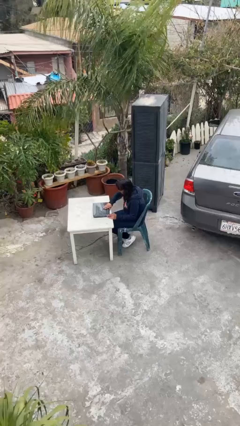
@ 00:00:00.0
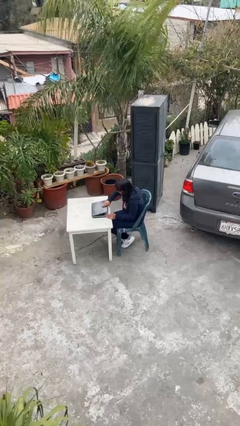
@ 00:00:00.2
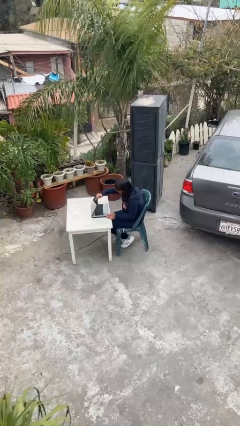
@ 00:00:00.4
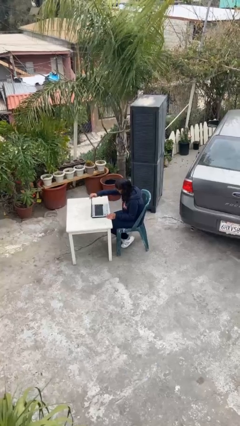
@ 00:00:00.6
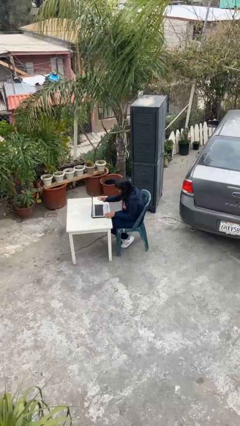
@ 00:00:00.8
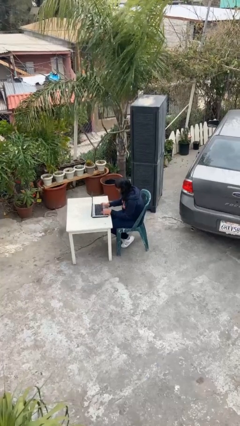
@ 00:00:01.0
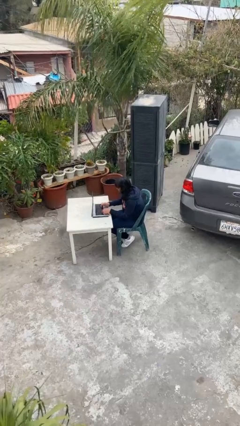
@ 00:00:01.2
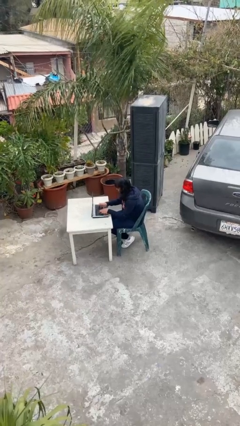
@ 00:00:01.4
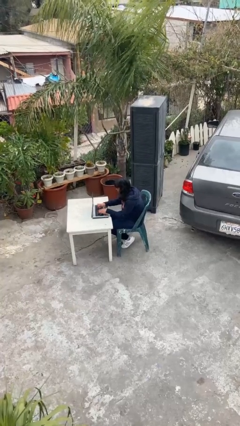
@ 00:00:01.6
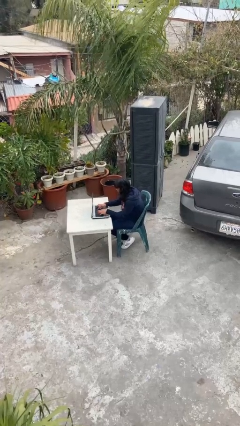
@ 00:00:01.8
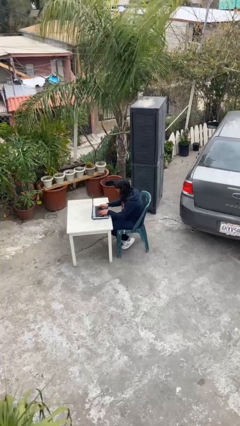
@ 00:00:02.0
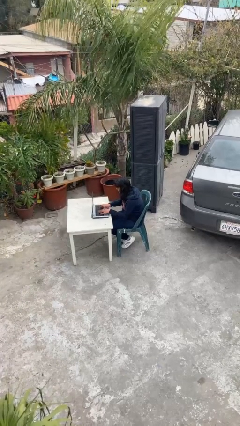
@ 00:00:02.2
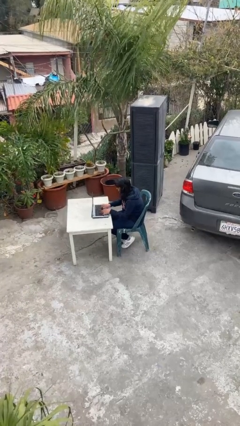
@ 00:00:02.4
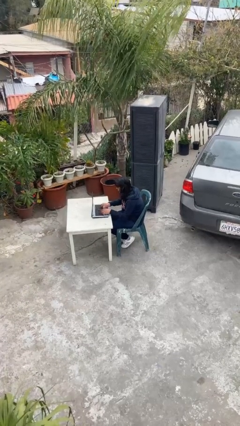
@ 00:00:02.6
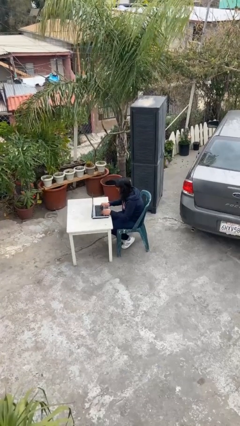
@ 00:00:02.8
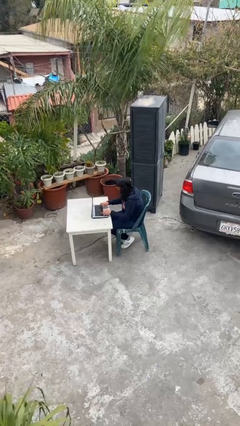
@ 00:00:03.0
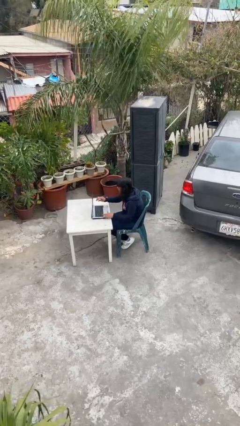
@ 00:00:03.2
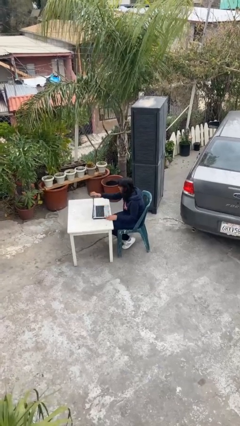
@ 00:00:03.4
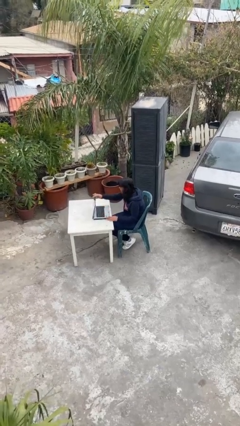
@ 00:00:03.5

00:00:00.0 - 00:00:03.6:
person interacts with laptop

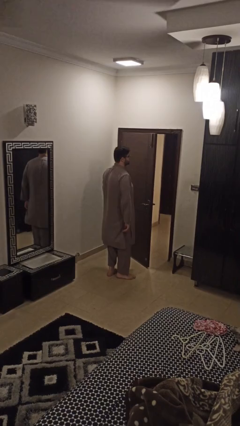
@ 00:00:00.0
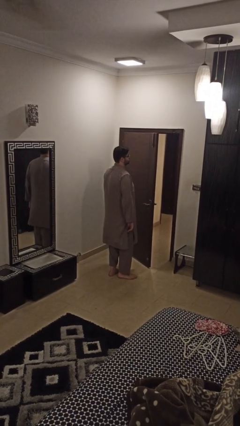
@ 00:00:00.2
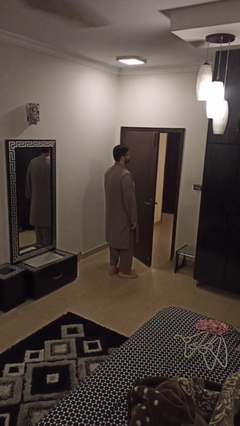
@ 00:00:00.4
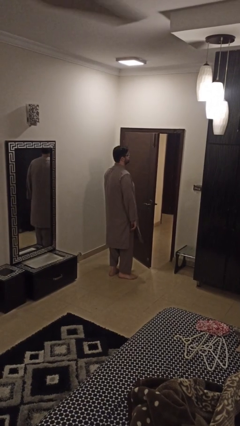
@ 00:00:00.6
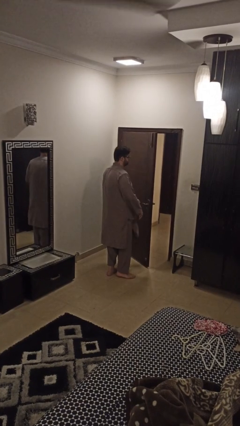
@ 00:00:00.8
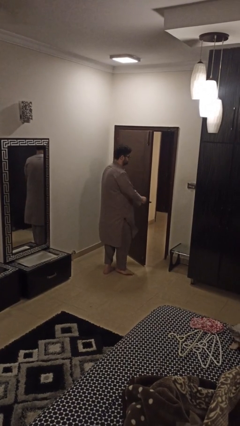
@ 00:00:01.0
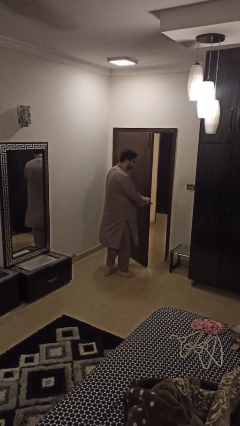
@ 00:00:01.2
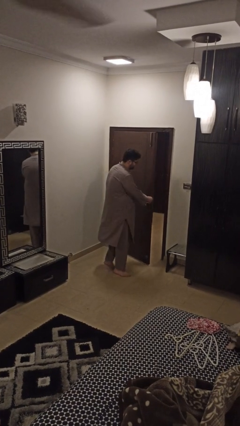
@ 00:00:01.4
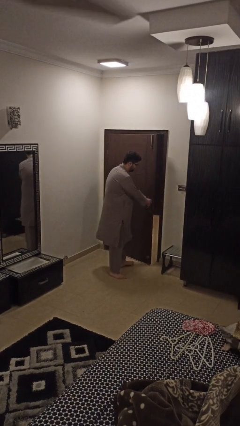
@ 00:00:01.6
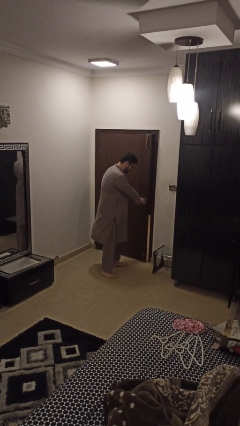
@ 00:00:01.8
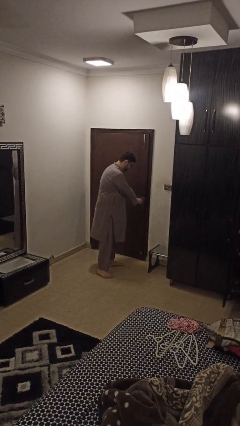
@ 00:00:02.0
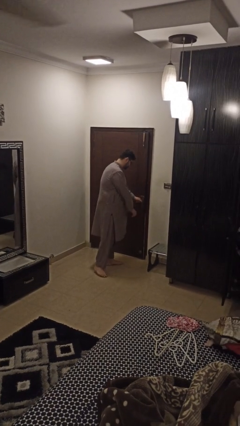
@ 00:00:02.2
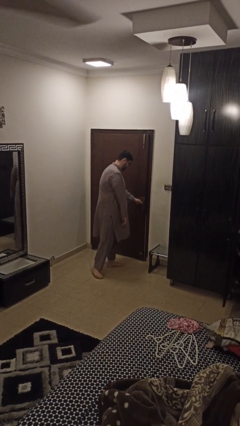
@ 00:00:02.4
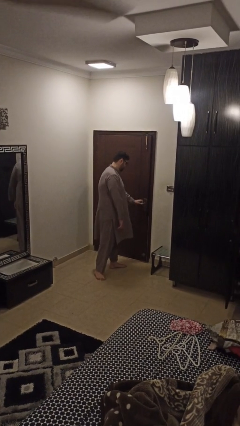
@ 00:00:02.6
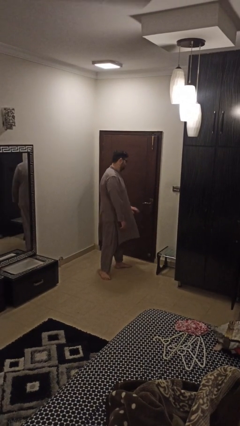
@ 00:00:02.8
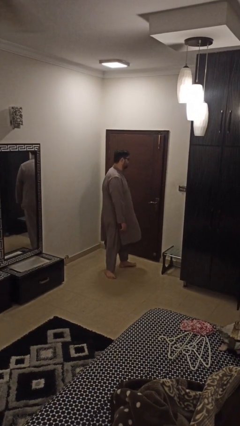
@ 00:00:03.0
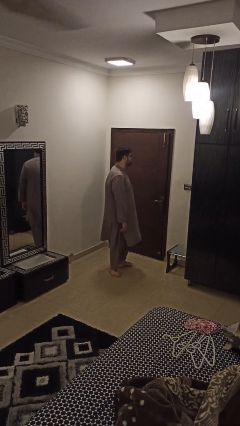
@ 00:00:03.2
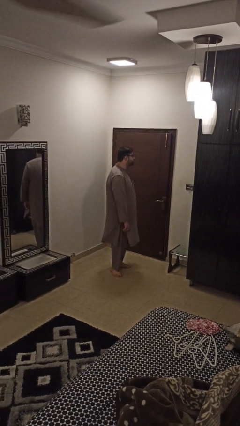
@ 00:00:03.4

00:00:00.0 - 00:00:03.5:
person closes facility door

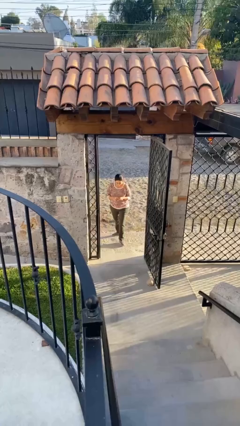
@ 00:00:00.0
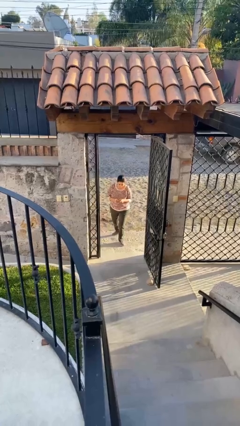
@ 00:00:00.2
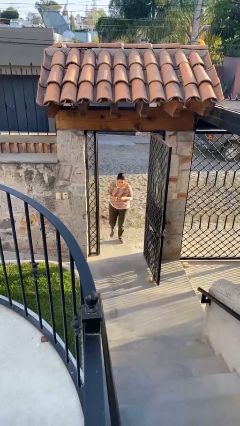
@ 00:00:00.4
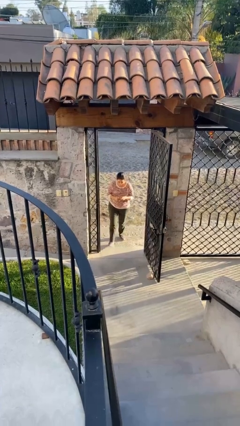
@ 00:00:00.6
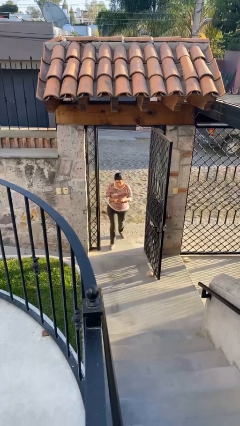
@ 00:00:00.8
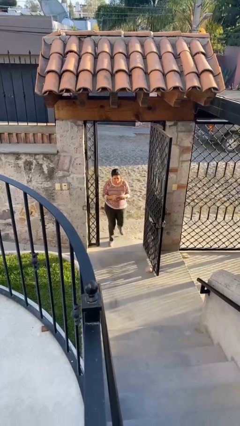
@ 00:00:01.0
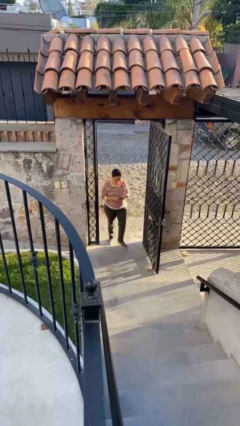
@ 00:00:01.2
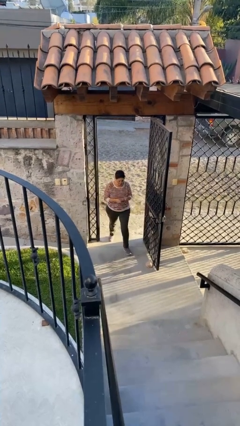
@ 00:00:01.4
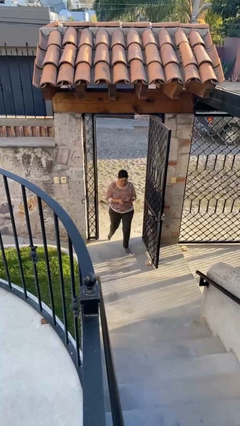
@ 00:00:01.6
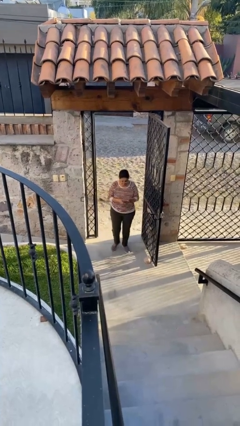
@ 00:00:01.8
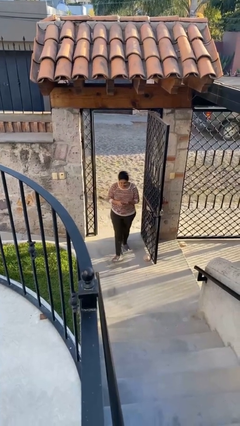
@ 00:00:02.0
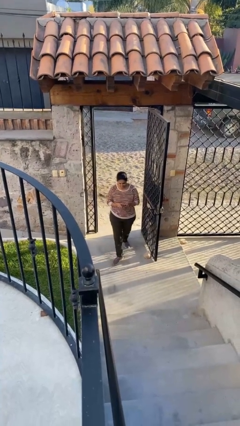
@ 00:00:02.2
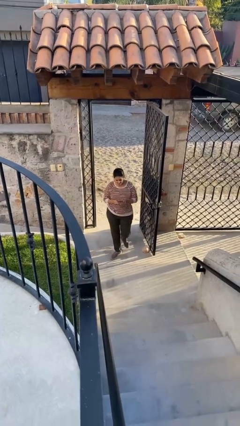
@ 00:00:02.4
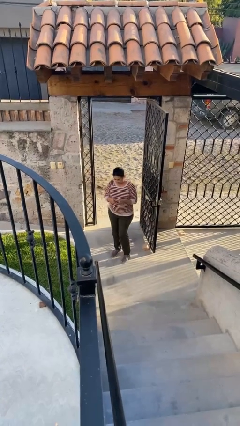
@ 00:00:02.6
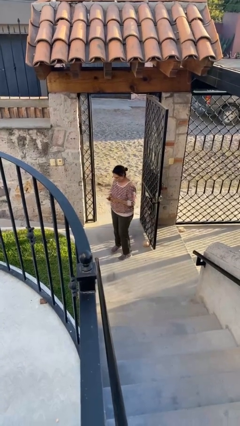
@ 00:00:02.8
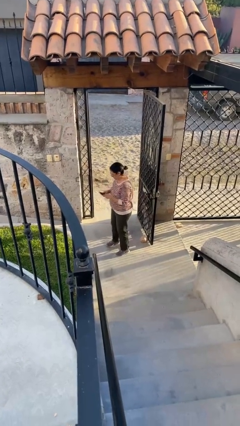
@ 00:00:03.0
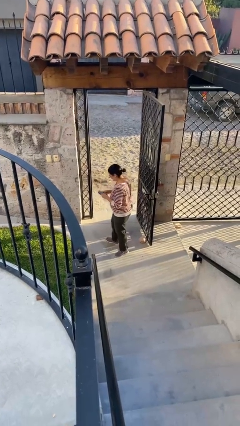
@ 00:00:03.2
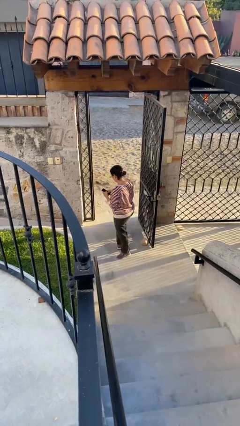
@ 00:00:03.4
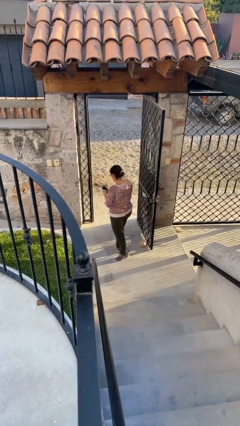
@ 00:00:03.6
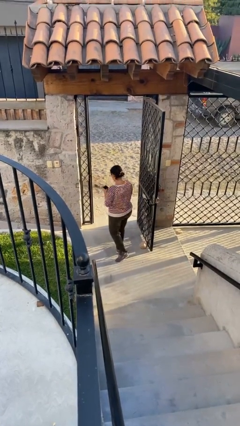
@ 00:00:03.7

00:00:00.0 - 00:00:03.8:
person enters scene through structure

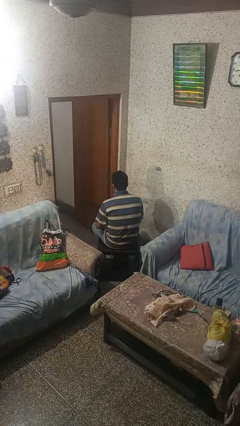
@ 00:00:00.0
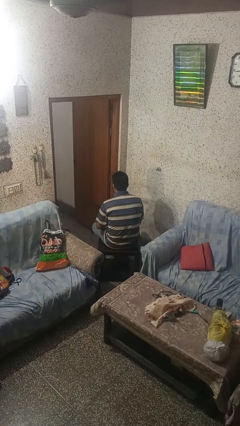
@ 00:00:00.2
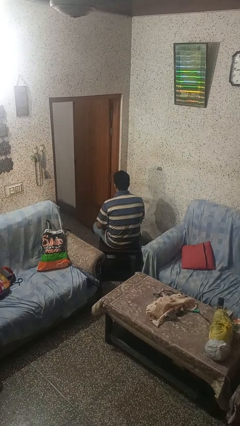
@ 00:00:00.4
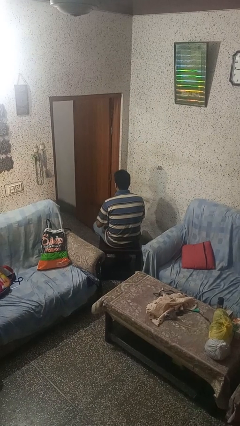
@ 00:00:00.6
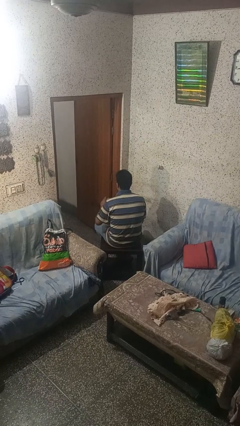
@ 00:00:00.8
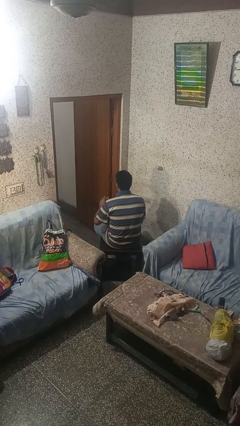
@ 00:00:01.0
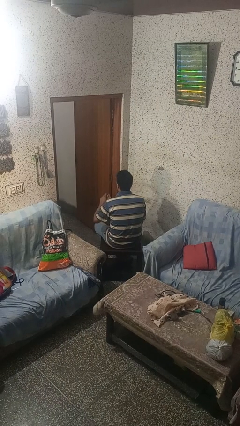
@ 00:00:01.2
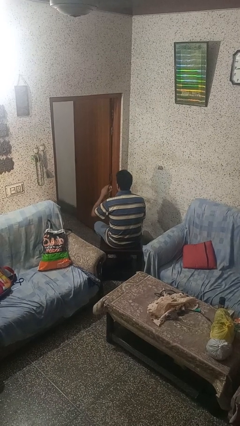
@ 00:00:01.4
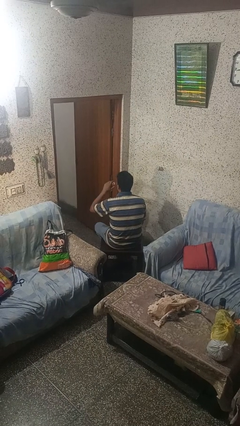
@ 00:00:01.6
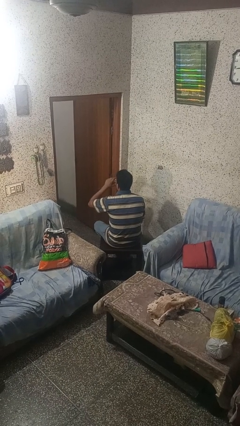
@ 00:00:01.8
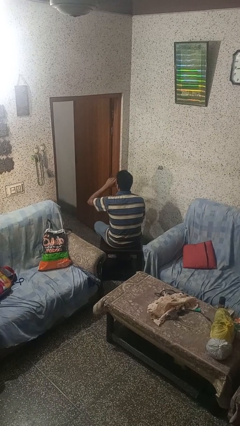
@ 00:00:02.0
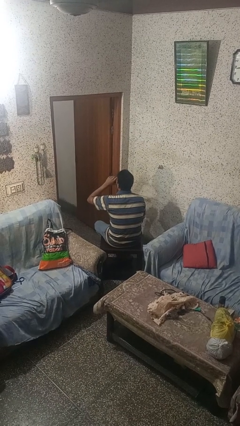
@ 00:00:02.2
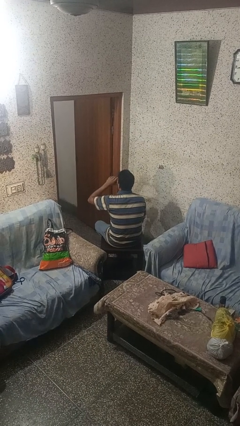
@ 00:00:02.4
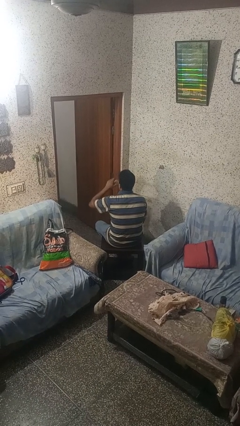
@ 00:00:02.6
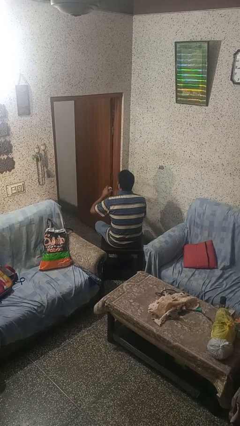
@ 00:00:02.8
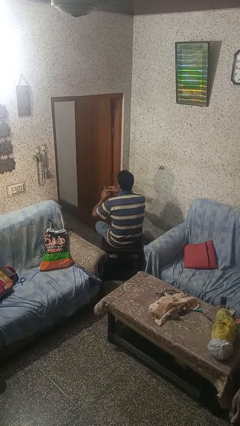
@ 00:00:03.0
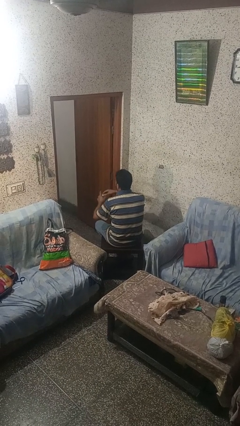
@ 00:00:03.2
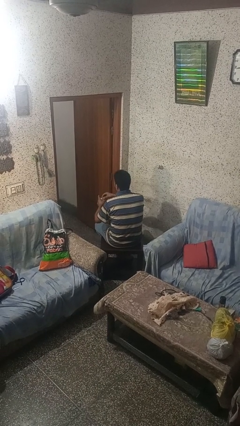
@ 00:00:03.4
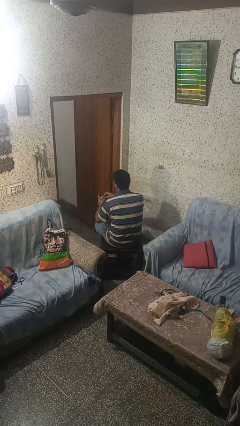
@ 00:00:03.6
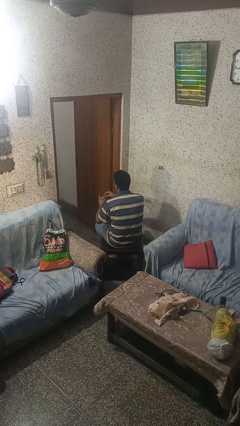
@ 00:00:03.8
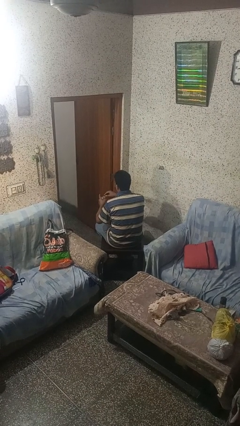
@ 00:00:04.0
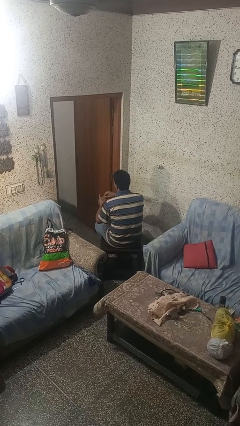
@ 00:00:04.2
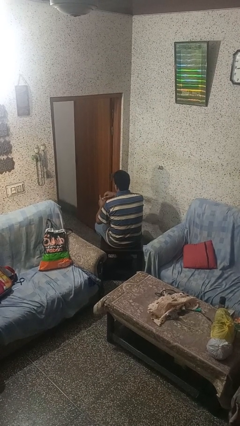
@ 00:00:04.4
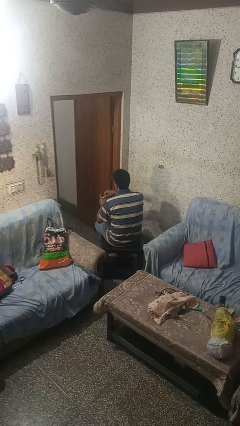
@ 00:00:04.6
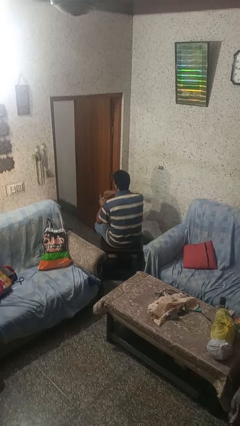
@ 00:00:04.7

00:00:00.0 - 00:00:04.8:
person opens beverage can

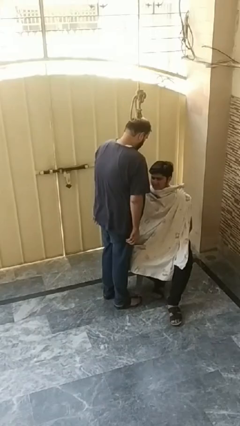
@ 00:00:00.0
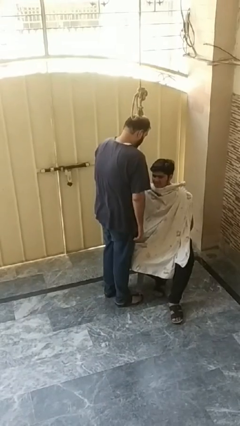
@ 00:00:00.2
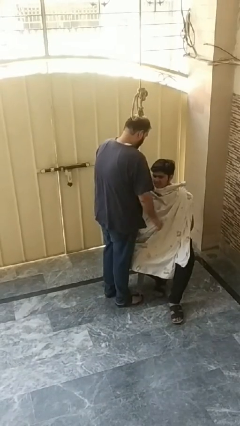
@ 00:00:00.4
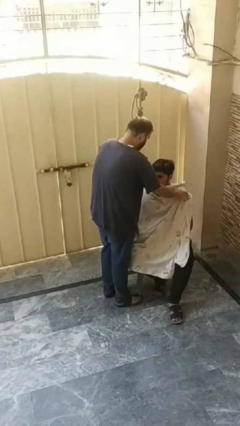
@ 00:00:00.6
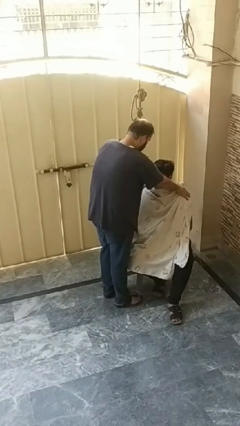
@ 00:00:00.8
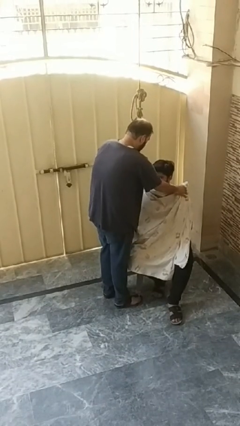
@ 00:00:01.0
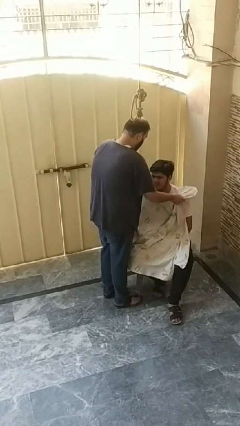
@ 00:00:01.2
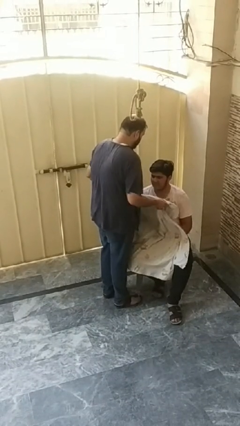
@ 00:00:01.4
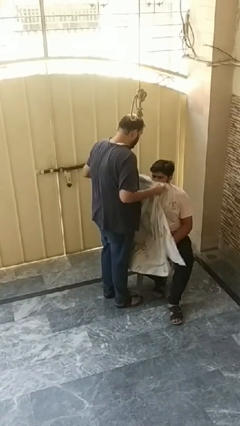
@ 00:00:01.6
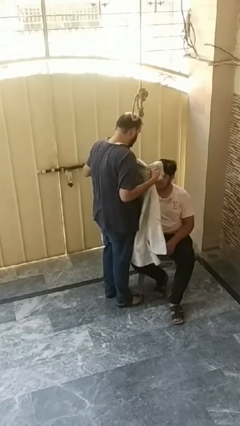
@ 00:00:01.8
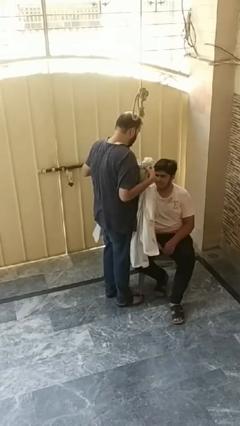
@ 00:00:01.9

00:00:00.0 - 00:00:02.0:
person uncovers friend with blanket
